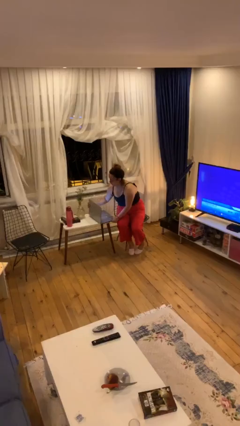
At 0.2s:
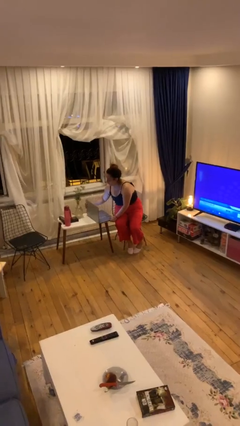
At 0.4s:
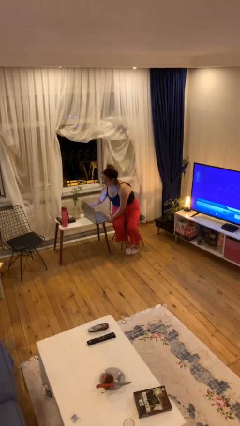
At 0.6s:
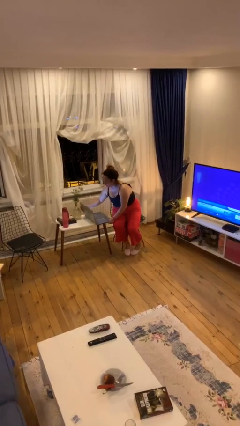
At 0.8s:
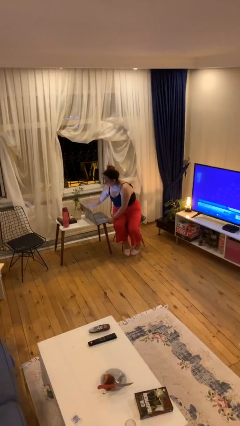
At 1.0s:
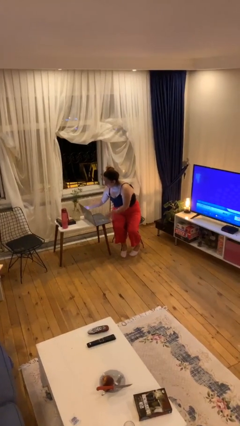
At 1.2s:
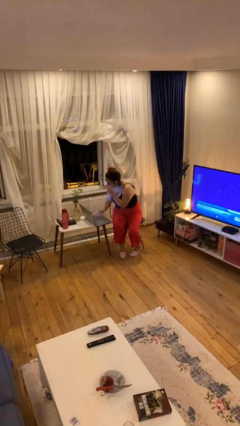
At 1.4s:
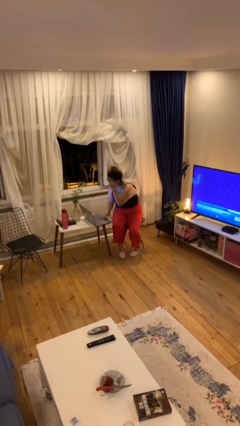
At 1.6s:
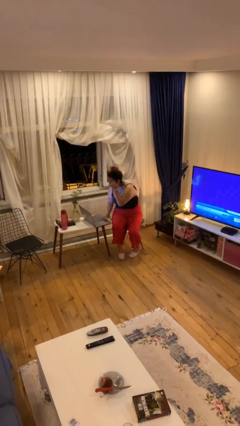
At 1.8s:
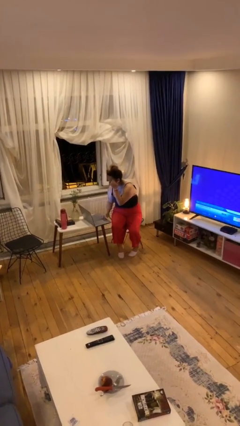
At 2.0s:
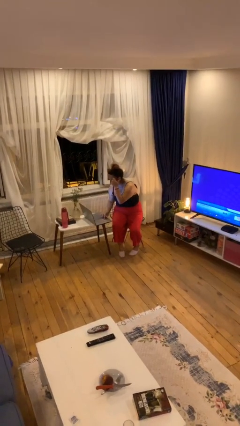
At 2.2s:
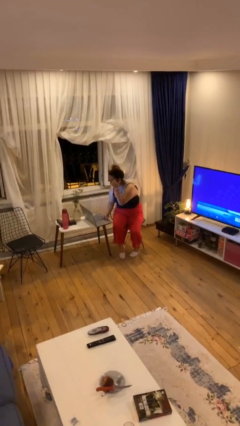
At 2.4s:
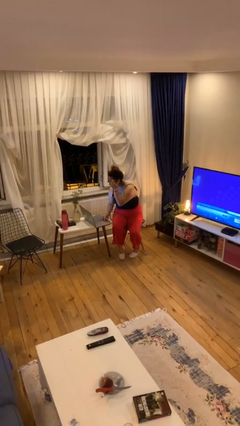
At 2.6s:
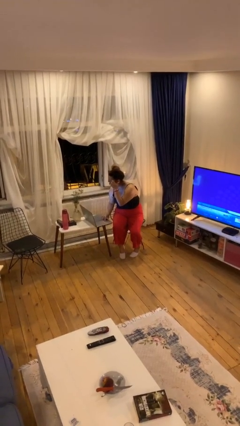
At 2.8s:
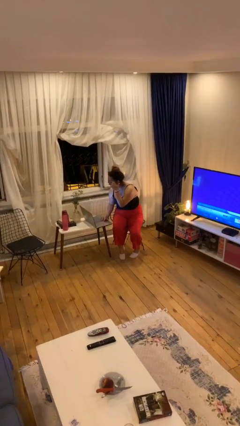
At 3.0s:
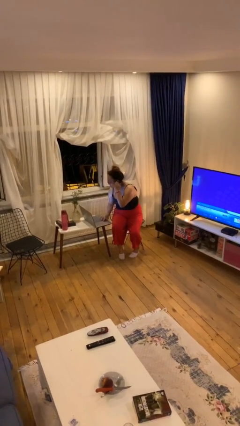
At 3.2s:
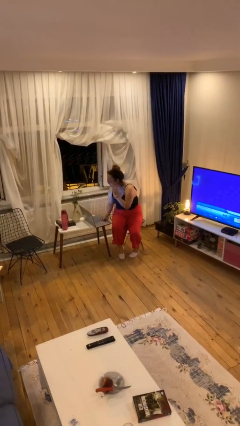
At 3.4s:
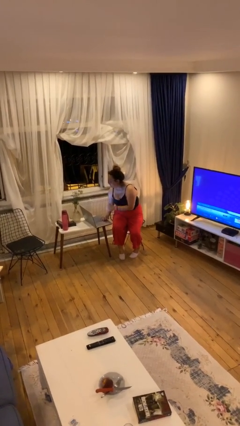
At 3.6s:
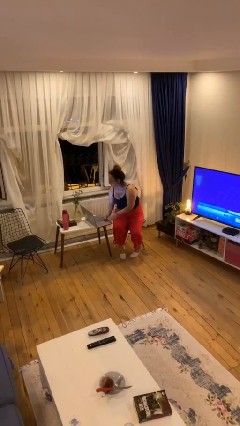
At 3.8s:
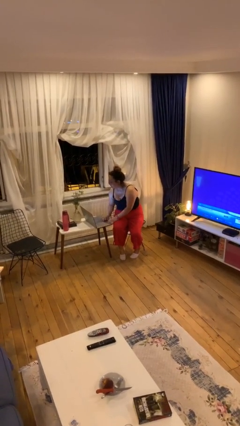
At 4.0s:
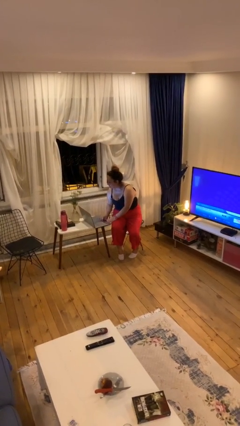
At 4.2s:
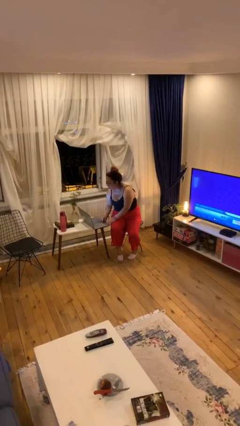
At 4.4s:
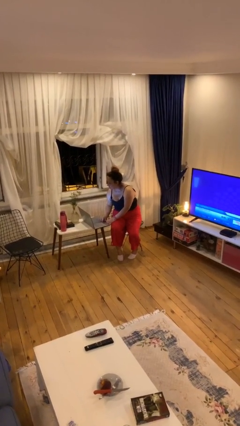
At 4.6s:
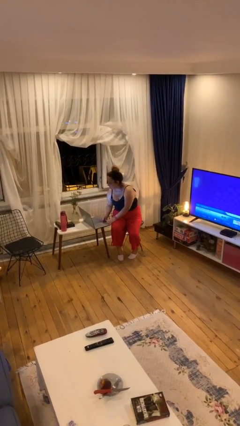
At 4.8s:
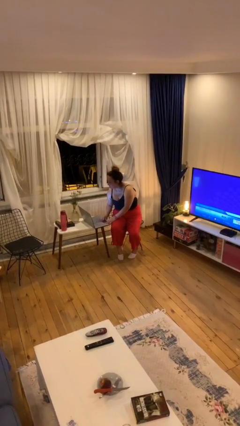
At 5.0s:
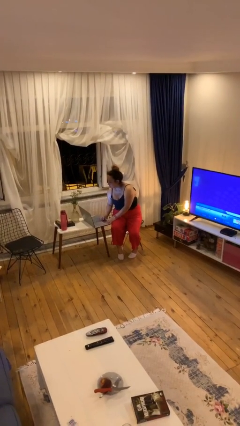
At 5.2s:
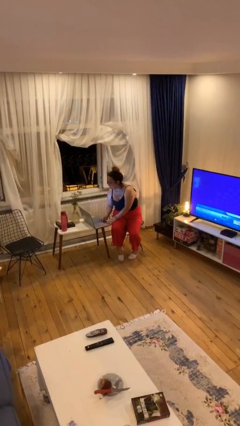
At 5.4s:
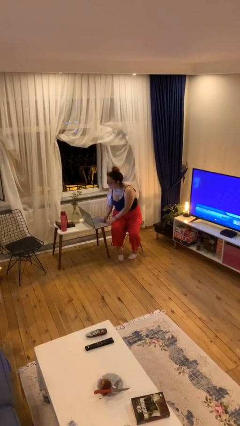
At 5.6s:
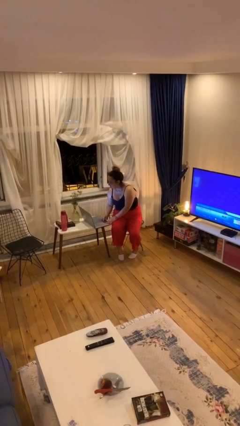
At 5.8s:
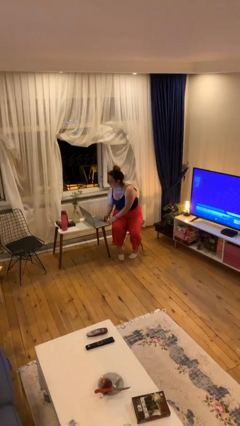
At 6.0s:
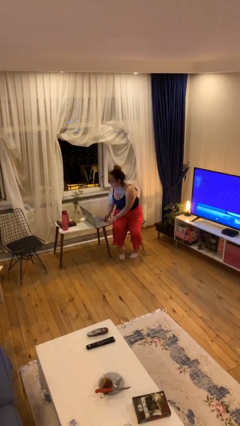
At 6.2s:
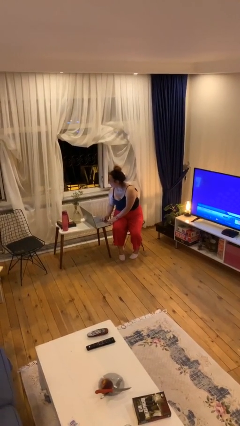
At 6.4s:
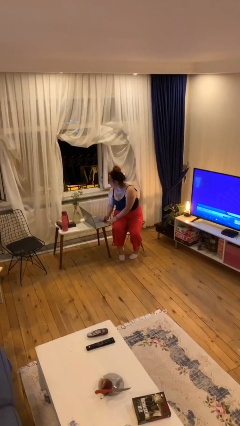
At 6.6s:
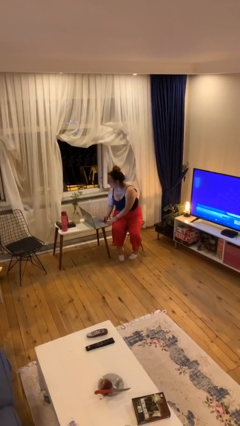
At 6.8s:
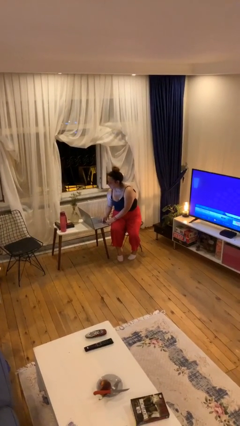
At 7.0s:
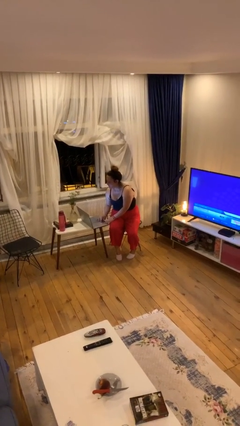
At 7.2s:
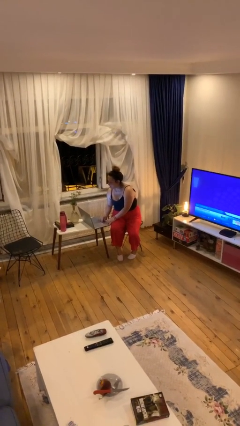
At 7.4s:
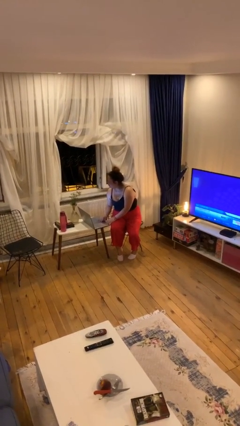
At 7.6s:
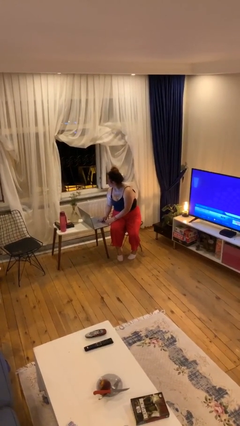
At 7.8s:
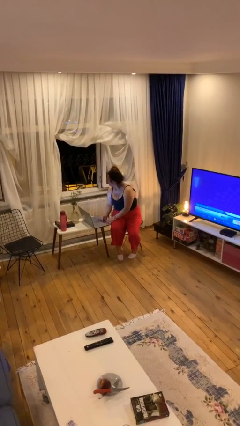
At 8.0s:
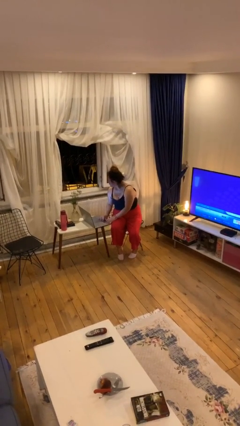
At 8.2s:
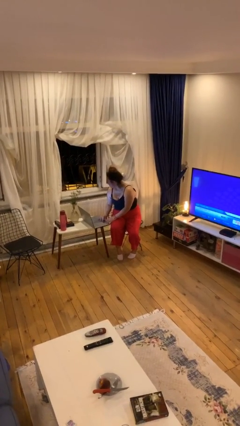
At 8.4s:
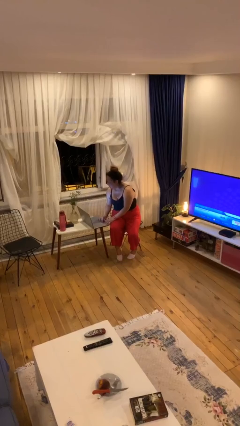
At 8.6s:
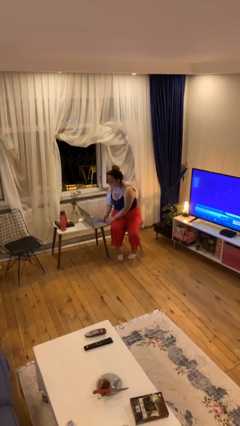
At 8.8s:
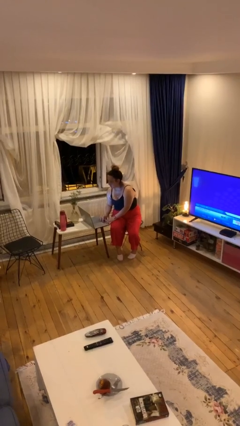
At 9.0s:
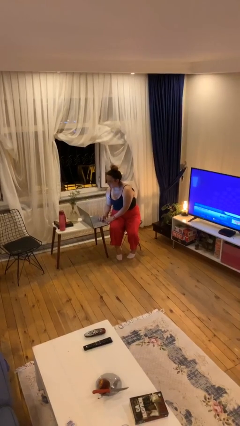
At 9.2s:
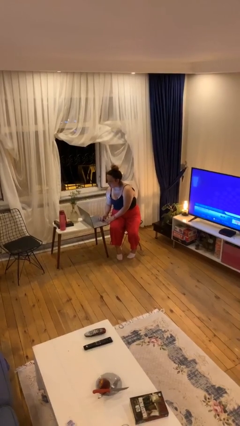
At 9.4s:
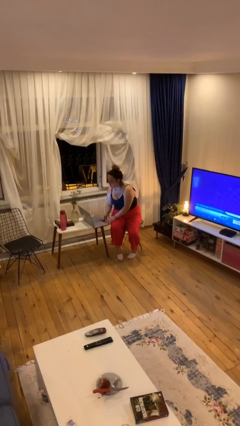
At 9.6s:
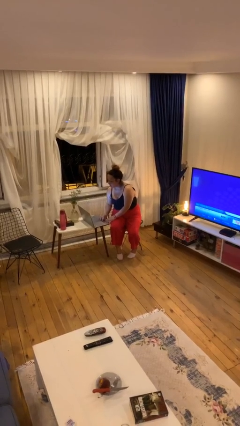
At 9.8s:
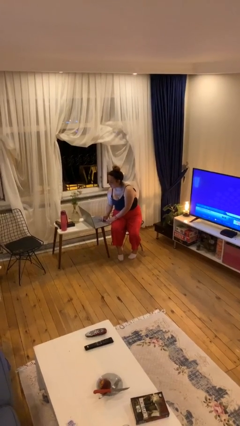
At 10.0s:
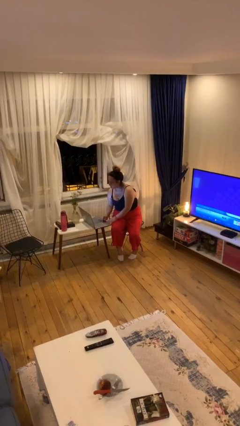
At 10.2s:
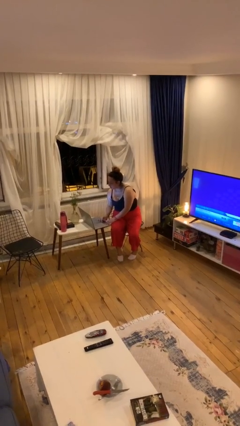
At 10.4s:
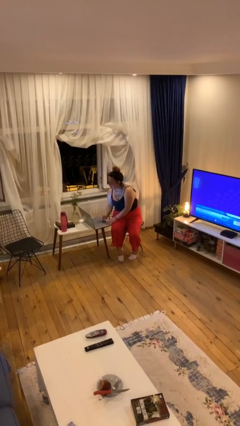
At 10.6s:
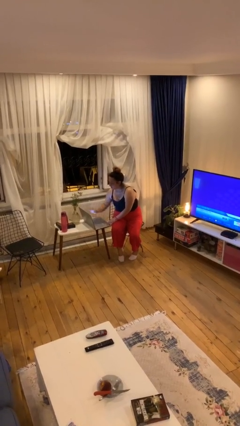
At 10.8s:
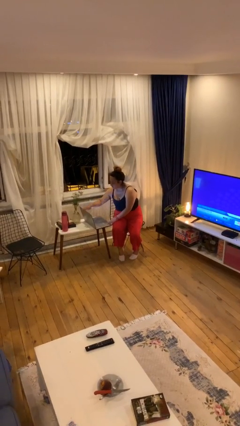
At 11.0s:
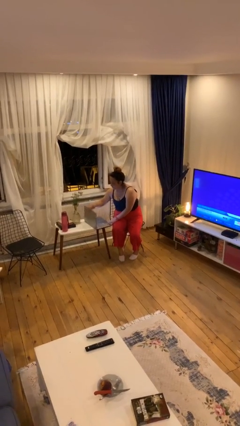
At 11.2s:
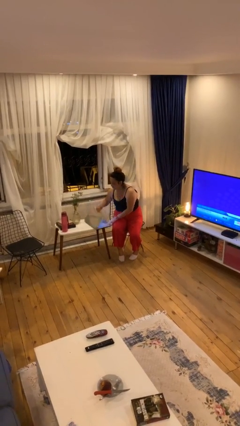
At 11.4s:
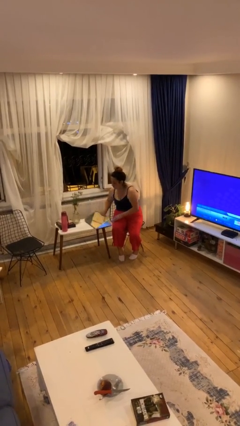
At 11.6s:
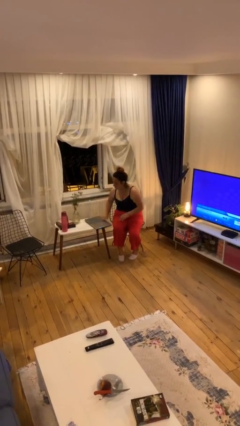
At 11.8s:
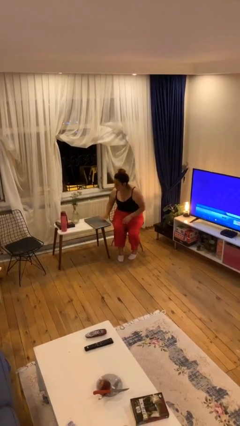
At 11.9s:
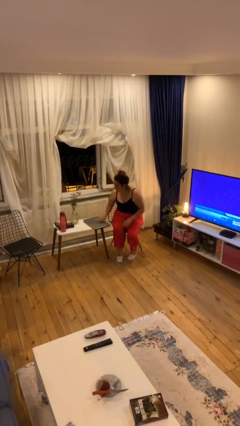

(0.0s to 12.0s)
person interacts with laptop

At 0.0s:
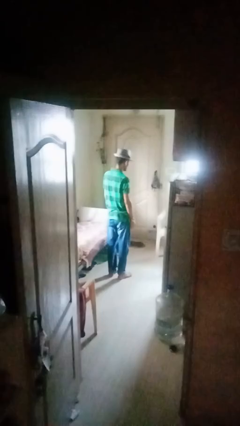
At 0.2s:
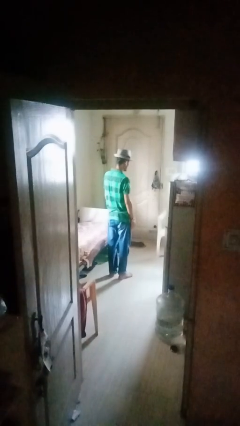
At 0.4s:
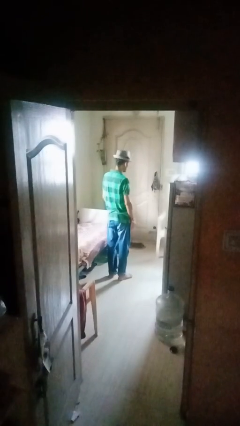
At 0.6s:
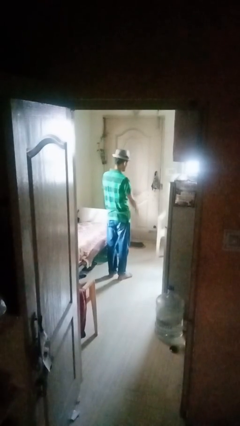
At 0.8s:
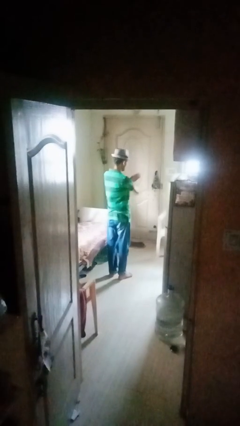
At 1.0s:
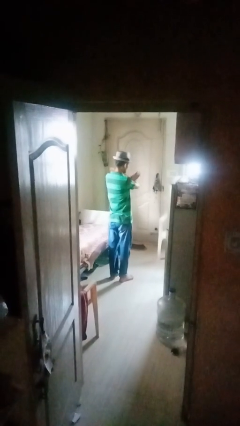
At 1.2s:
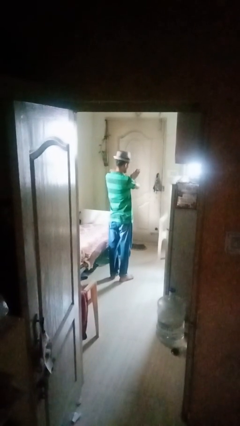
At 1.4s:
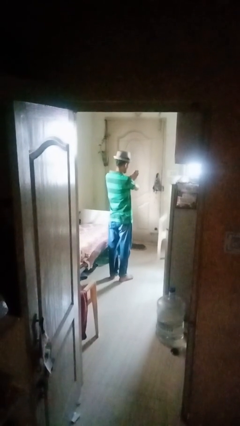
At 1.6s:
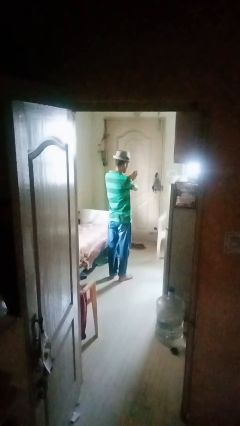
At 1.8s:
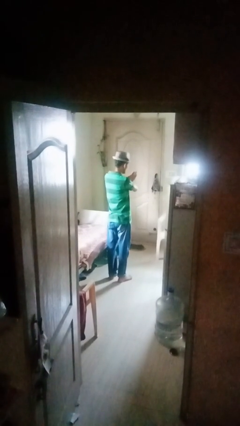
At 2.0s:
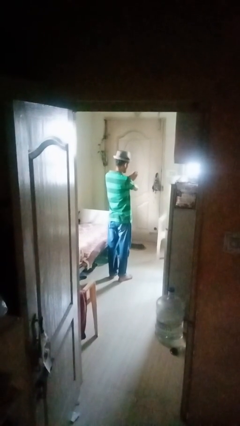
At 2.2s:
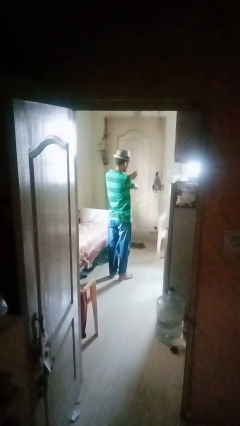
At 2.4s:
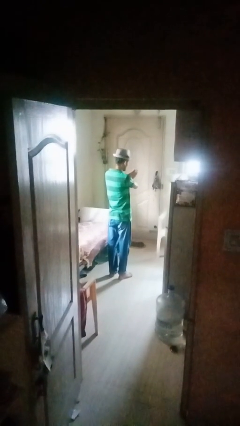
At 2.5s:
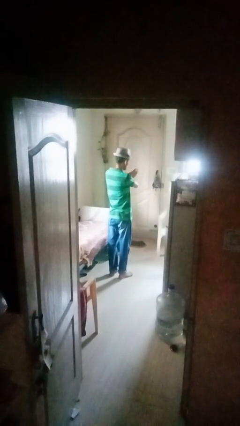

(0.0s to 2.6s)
person gestures arms x

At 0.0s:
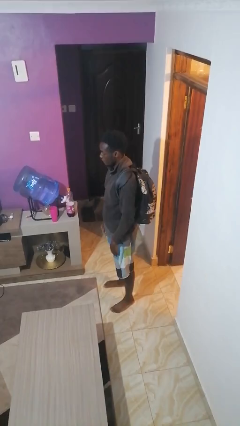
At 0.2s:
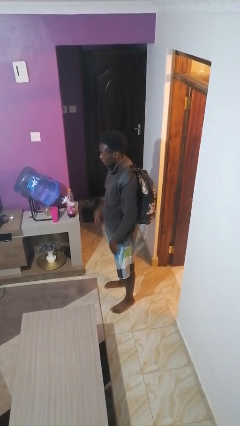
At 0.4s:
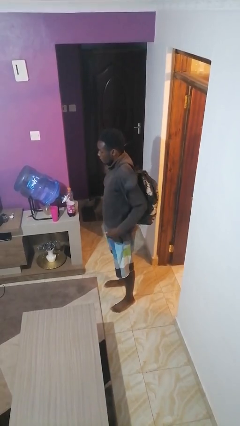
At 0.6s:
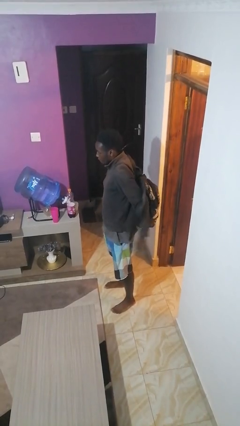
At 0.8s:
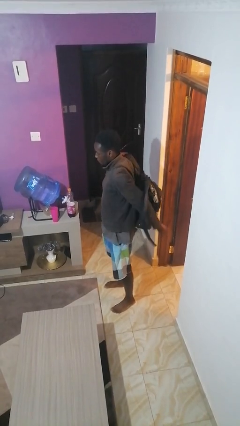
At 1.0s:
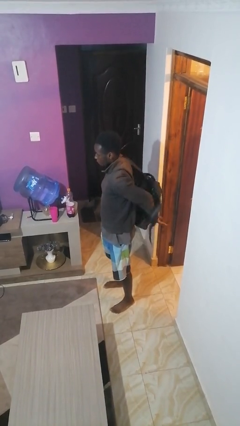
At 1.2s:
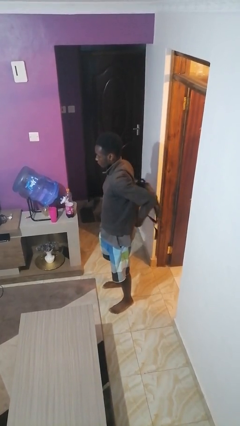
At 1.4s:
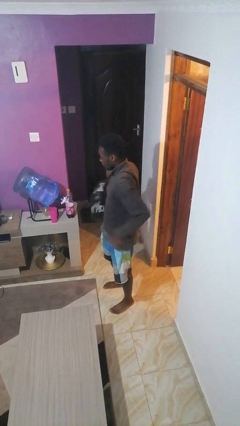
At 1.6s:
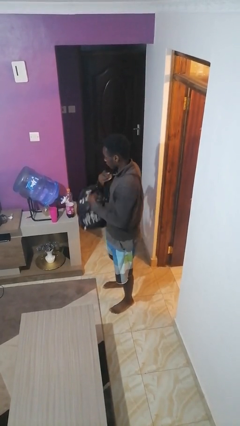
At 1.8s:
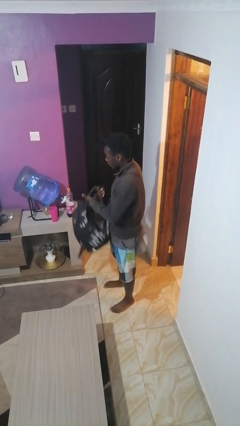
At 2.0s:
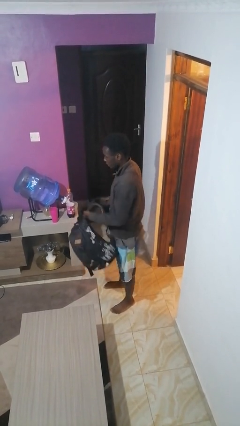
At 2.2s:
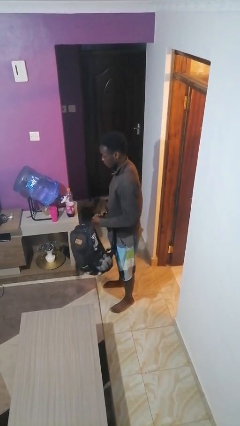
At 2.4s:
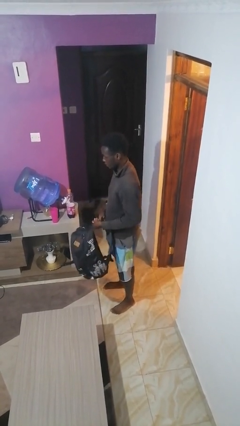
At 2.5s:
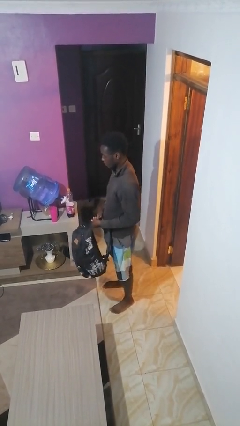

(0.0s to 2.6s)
person takes off backpack

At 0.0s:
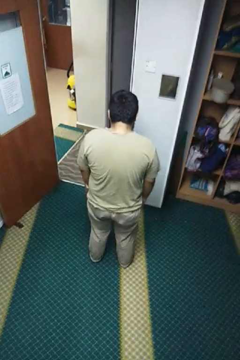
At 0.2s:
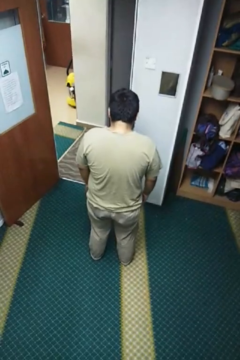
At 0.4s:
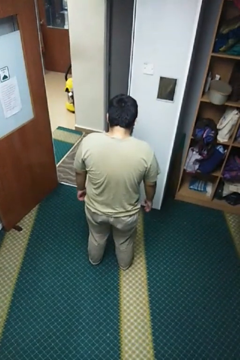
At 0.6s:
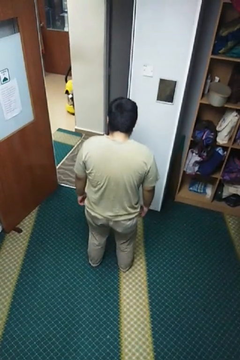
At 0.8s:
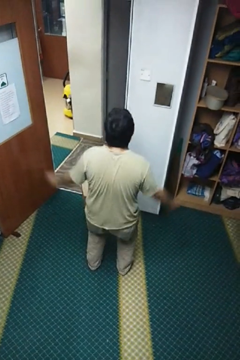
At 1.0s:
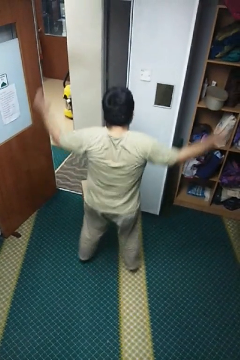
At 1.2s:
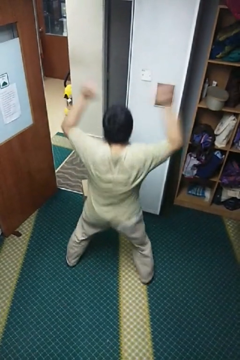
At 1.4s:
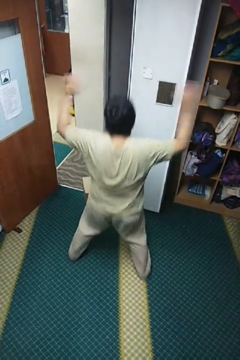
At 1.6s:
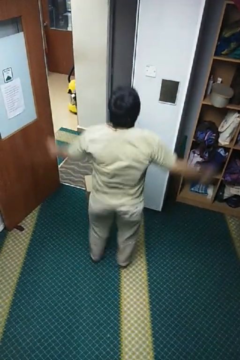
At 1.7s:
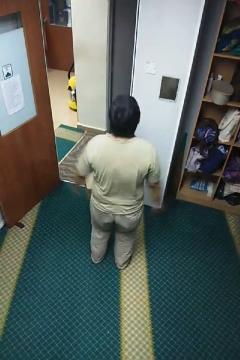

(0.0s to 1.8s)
person exercises with jumping jacks
